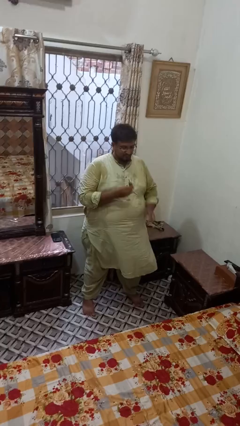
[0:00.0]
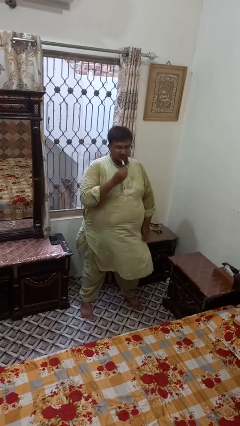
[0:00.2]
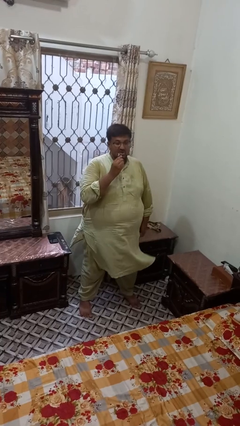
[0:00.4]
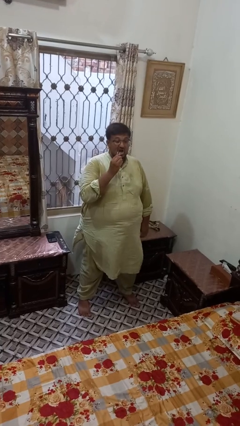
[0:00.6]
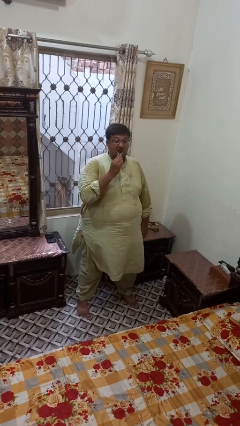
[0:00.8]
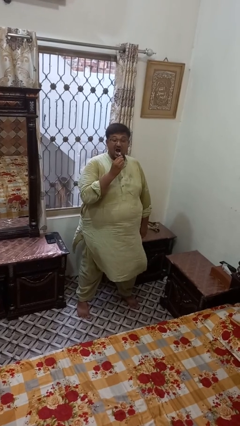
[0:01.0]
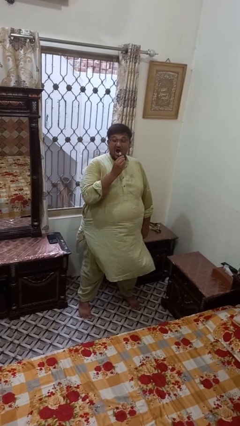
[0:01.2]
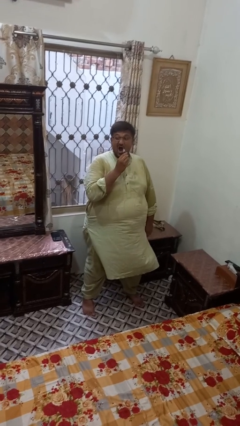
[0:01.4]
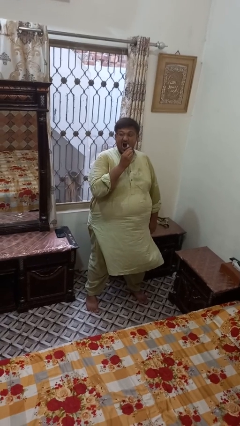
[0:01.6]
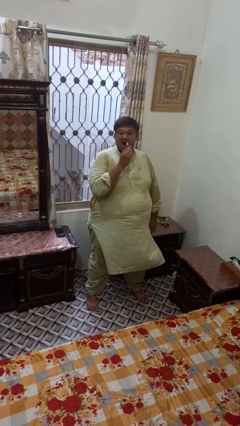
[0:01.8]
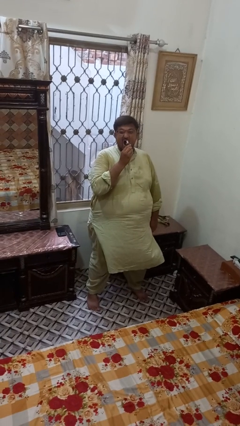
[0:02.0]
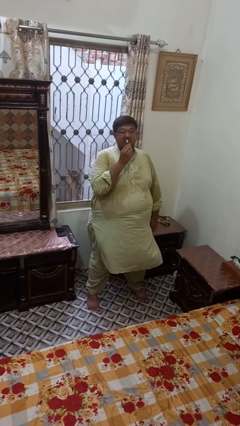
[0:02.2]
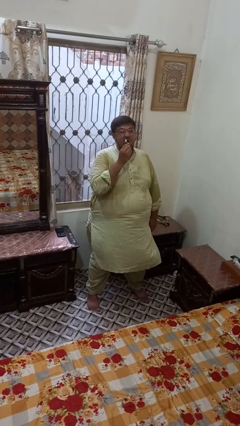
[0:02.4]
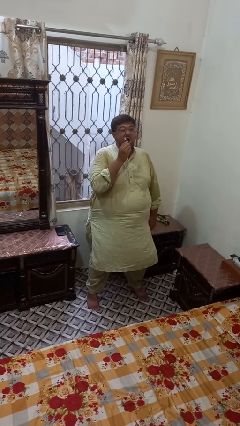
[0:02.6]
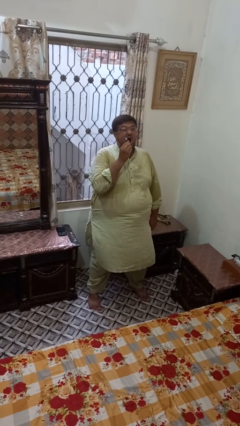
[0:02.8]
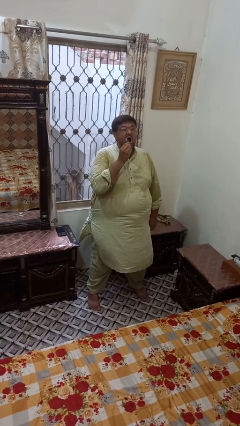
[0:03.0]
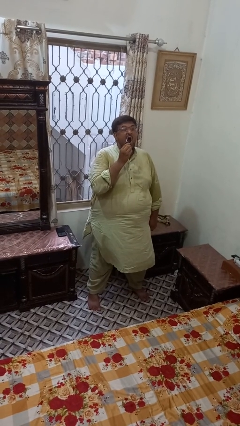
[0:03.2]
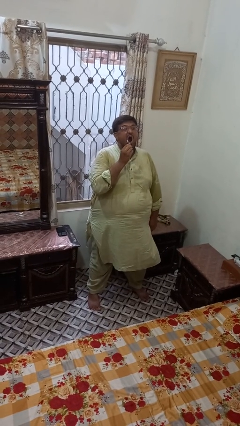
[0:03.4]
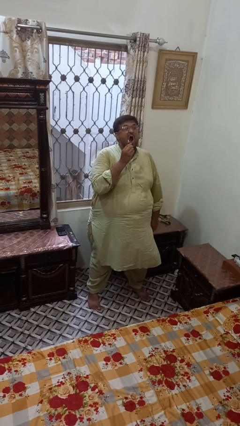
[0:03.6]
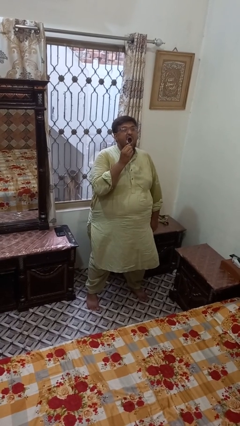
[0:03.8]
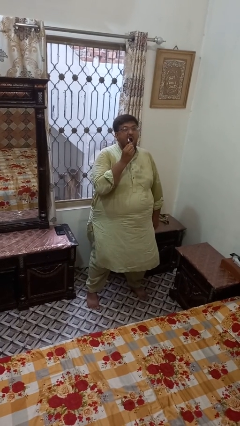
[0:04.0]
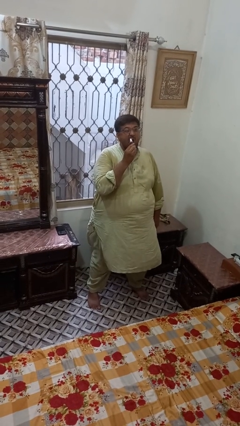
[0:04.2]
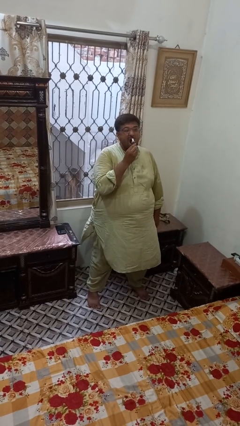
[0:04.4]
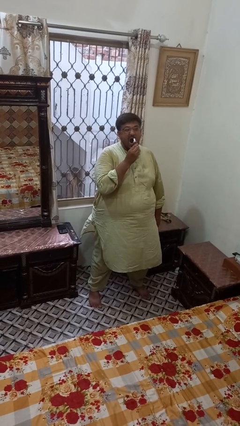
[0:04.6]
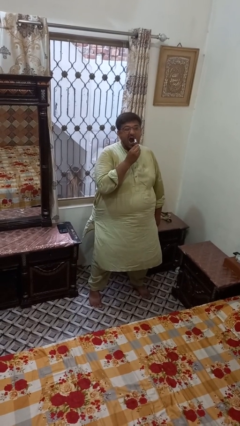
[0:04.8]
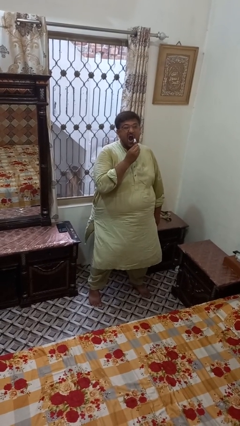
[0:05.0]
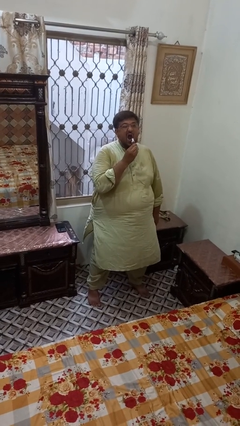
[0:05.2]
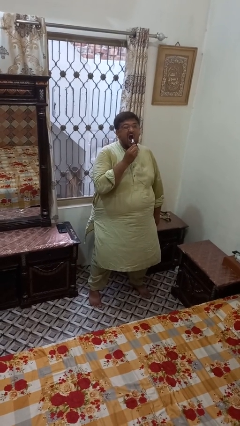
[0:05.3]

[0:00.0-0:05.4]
person applies lip makeup

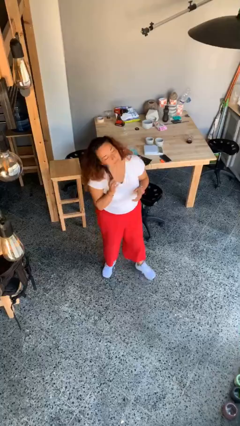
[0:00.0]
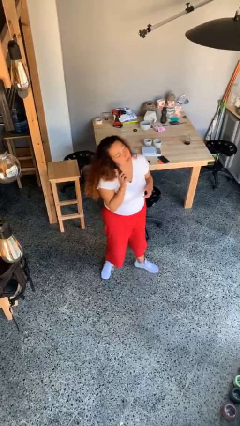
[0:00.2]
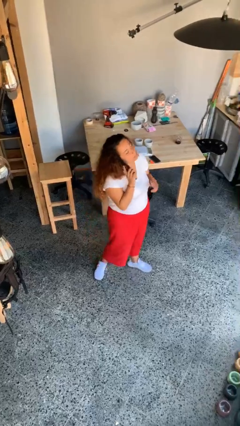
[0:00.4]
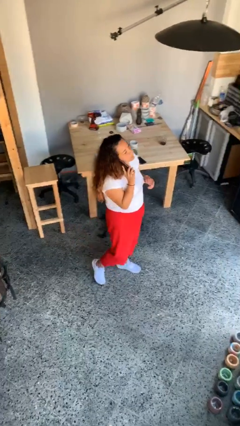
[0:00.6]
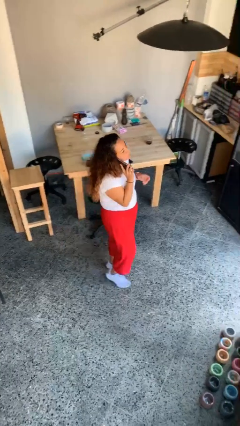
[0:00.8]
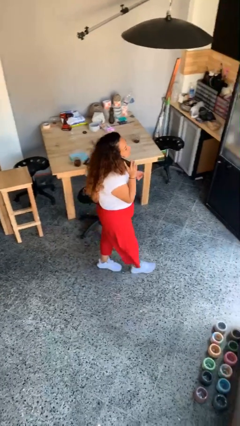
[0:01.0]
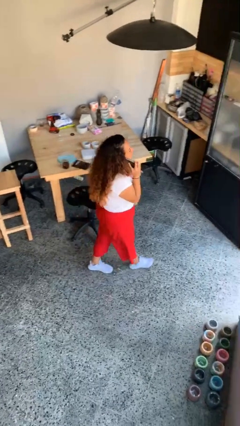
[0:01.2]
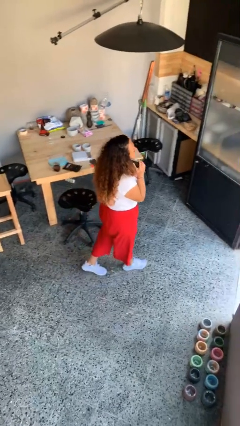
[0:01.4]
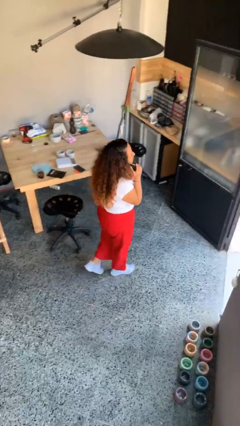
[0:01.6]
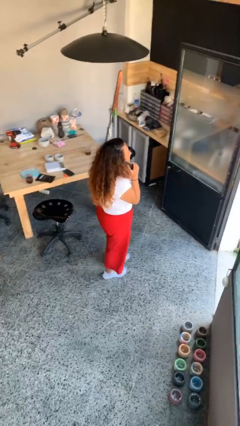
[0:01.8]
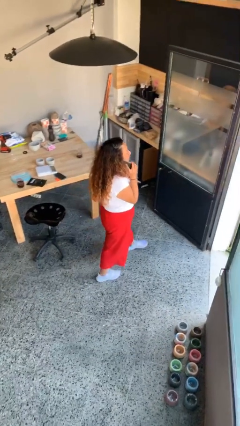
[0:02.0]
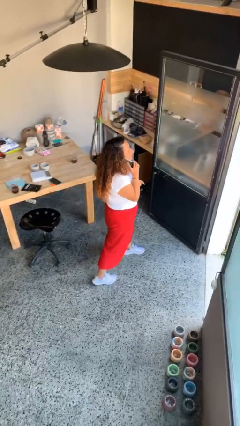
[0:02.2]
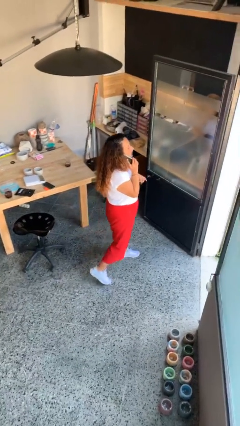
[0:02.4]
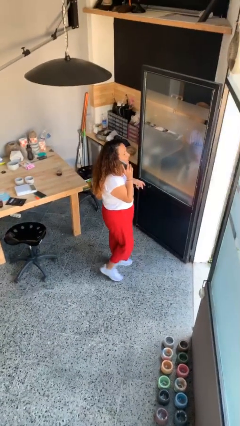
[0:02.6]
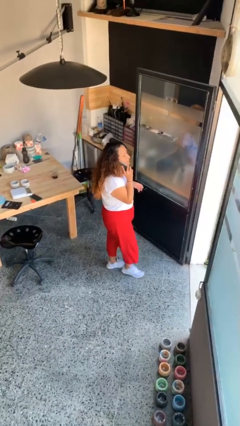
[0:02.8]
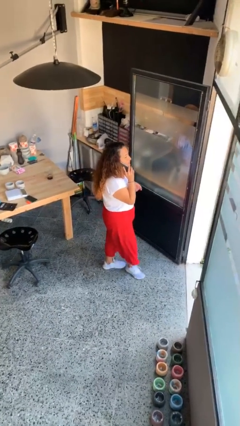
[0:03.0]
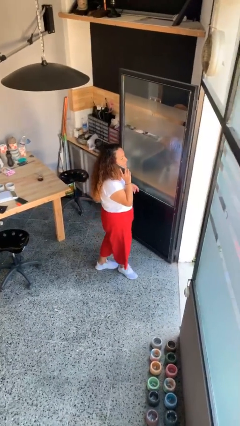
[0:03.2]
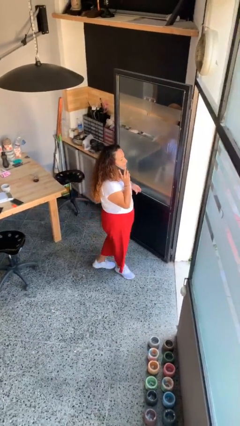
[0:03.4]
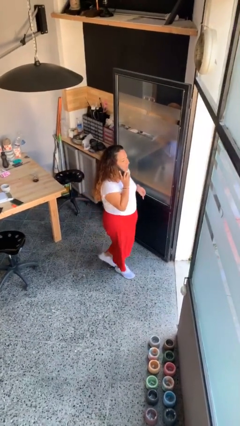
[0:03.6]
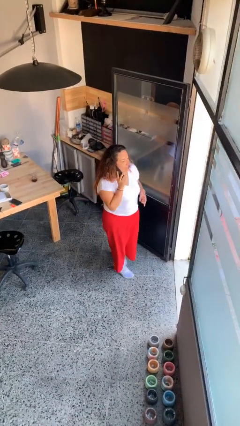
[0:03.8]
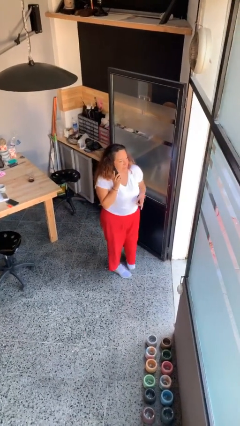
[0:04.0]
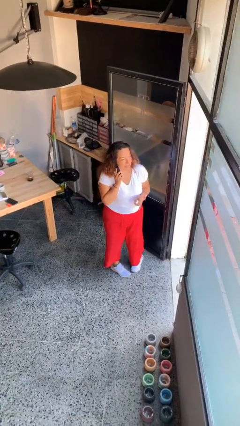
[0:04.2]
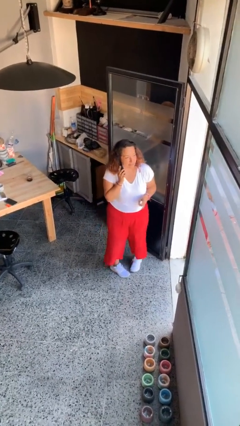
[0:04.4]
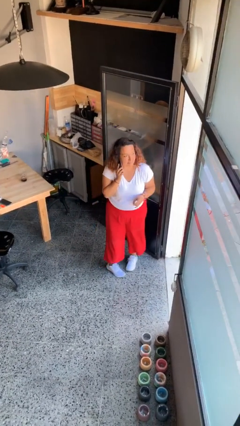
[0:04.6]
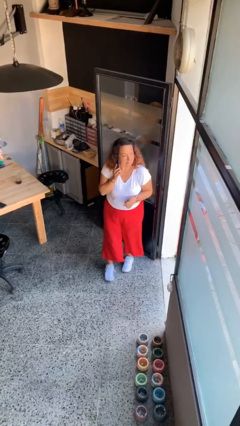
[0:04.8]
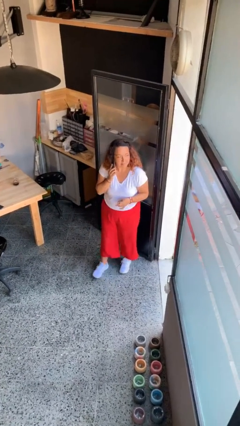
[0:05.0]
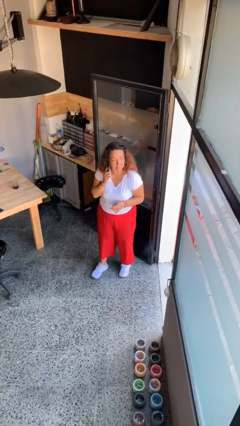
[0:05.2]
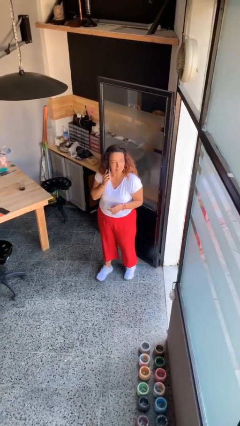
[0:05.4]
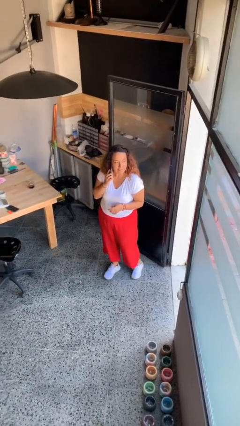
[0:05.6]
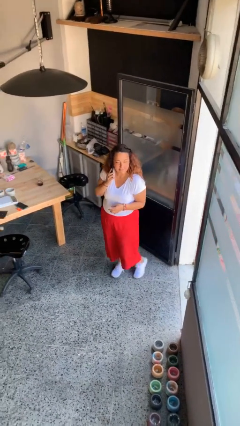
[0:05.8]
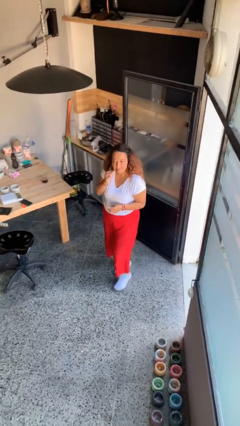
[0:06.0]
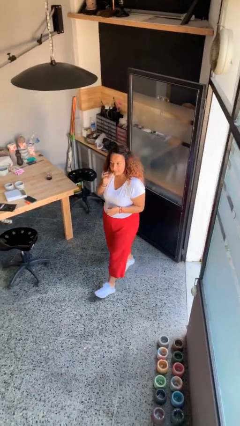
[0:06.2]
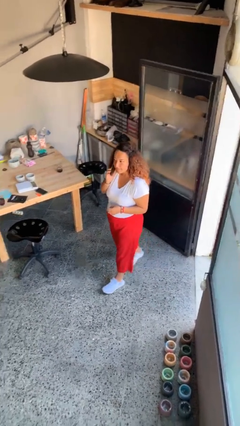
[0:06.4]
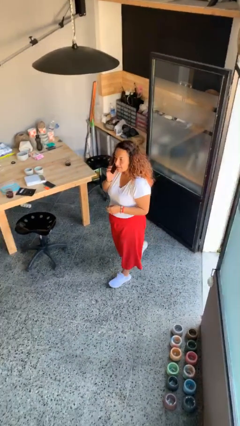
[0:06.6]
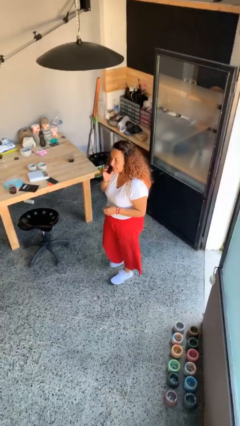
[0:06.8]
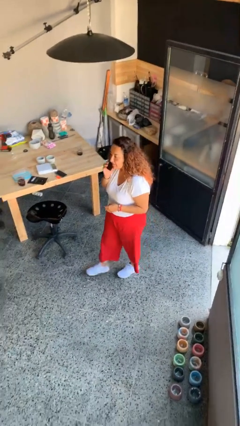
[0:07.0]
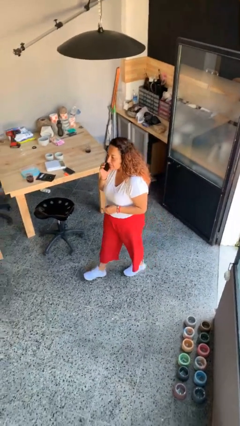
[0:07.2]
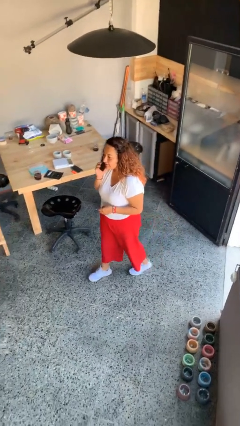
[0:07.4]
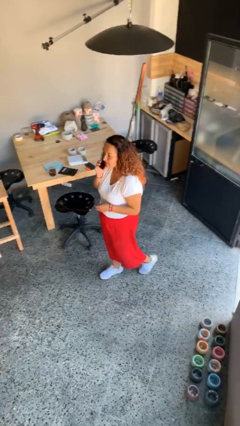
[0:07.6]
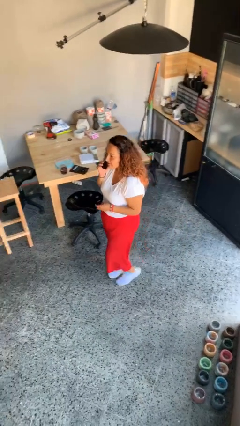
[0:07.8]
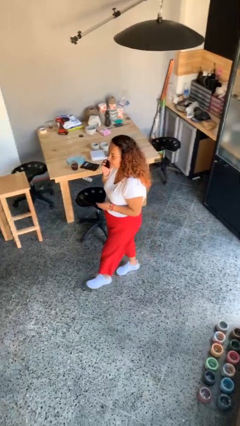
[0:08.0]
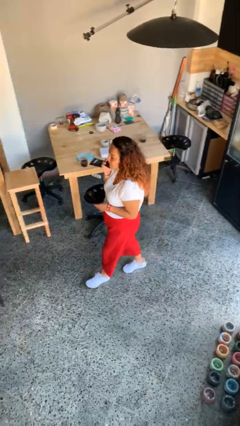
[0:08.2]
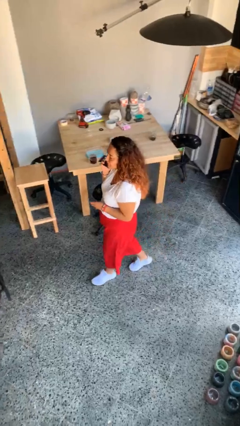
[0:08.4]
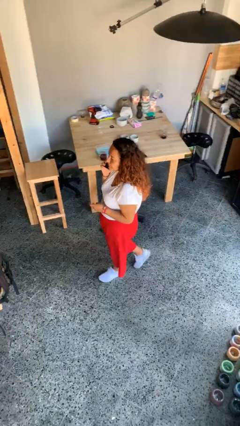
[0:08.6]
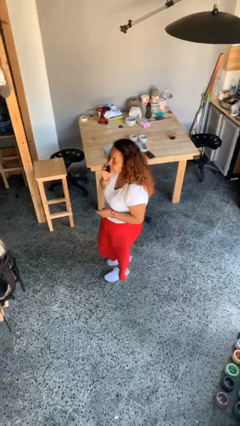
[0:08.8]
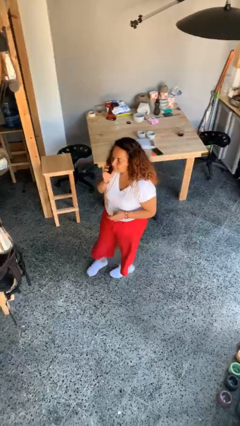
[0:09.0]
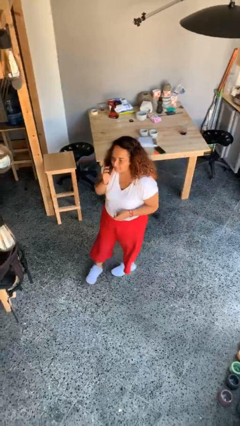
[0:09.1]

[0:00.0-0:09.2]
person talks on phone

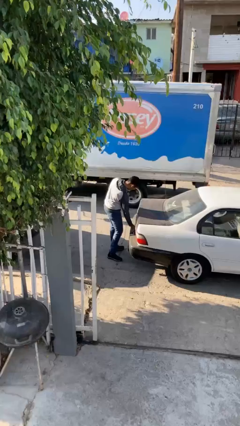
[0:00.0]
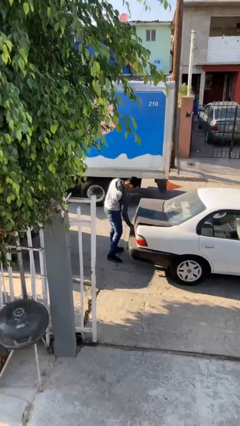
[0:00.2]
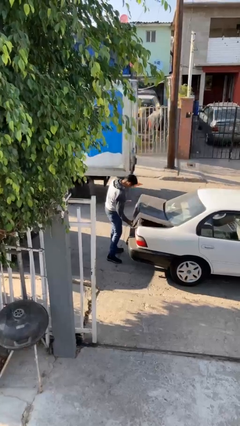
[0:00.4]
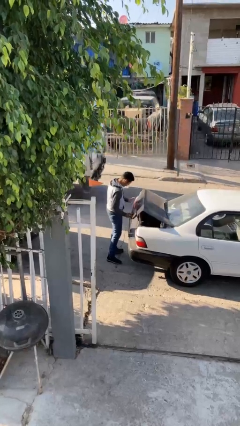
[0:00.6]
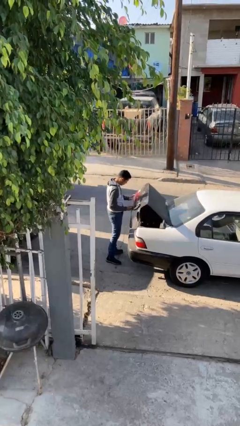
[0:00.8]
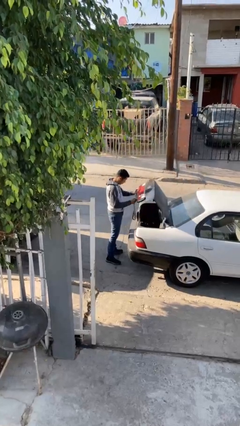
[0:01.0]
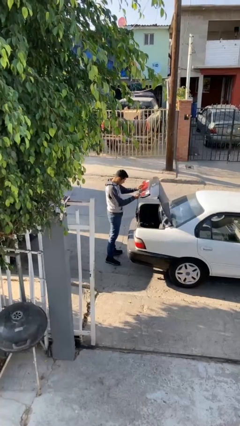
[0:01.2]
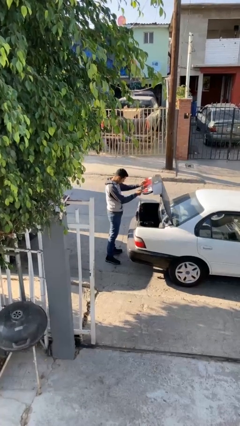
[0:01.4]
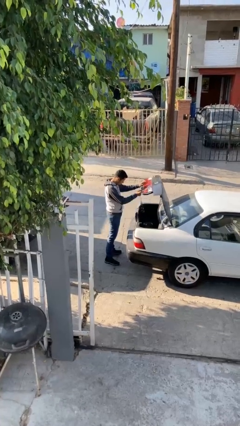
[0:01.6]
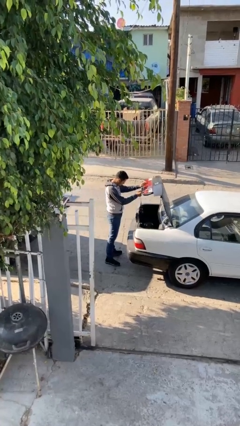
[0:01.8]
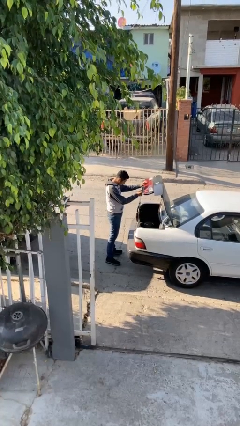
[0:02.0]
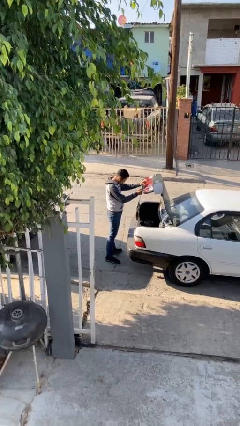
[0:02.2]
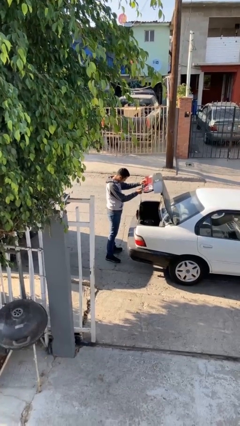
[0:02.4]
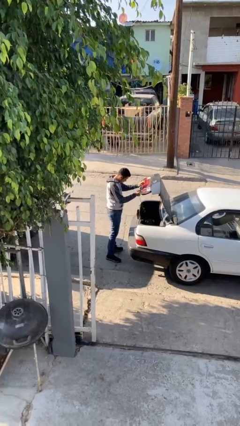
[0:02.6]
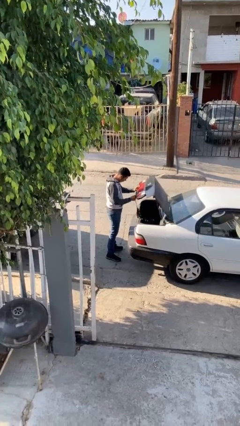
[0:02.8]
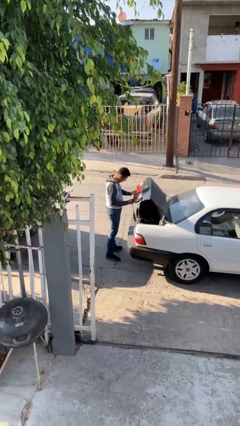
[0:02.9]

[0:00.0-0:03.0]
person opens car trunk

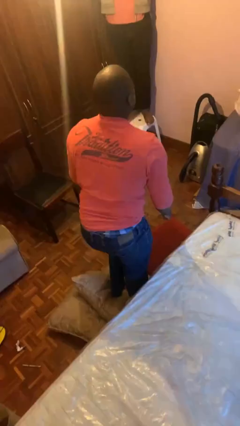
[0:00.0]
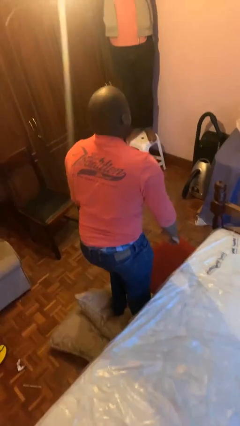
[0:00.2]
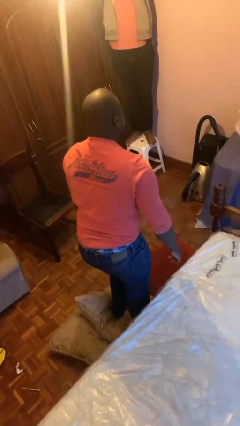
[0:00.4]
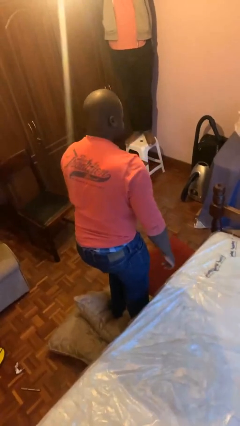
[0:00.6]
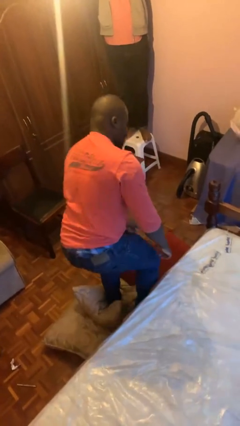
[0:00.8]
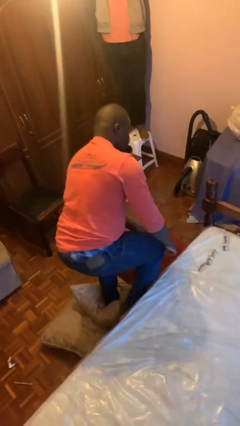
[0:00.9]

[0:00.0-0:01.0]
person stands up from floor
